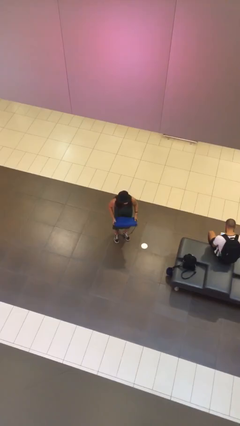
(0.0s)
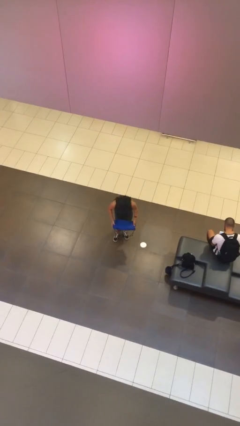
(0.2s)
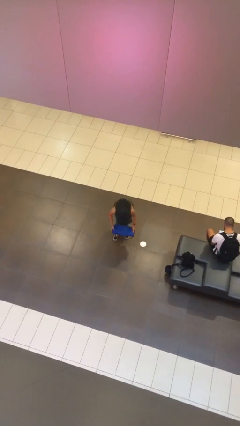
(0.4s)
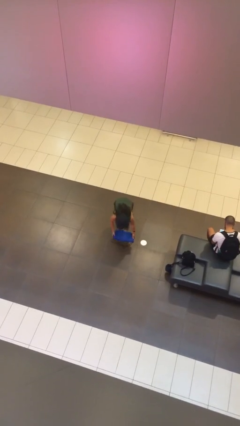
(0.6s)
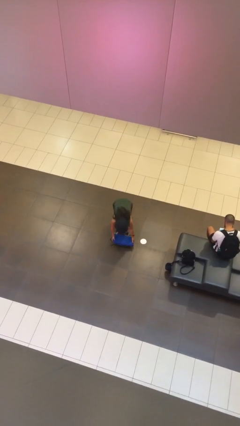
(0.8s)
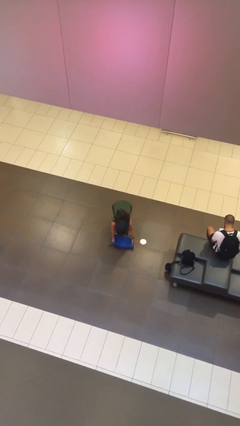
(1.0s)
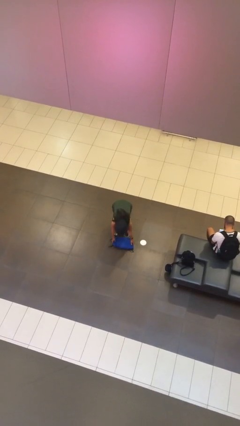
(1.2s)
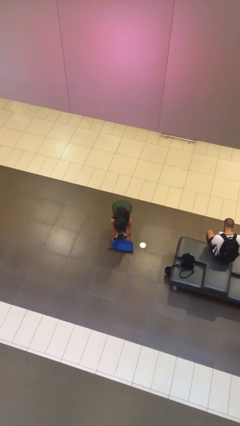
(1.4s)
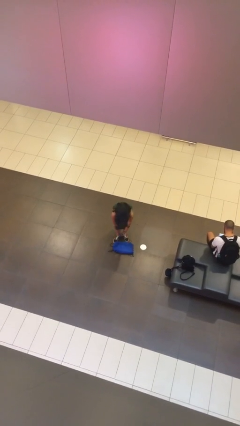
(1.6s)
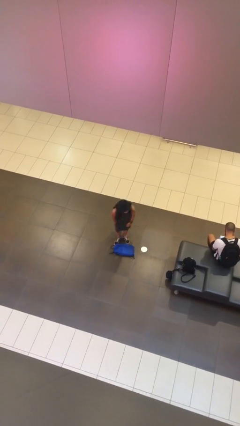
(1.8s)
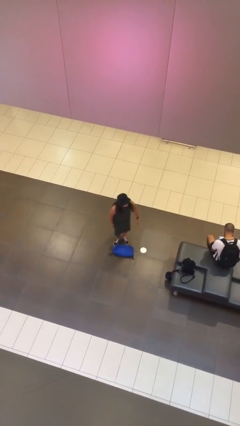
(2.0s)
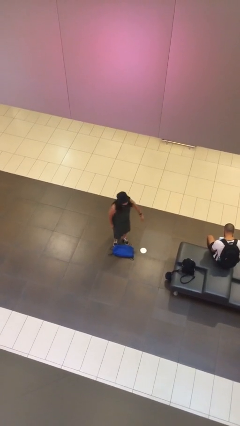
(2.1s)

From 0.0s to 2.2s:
person puts down object on floor

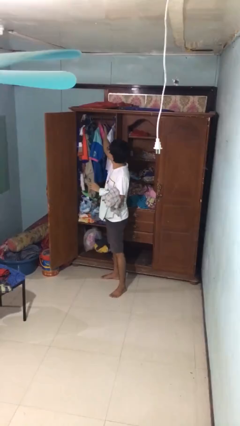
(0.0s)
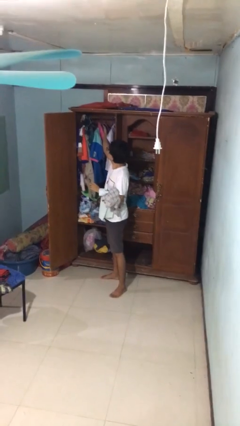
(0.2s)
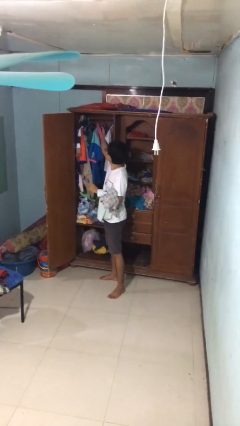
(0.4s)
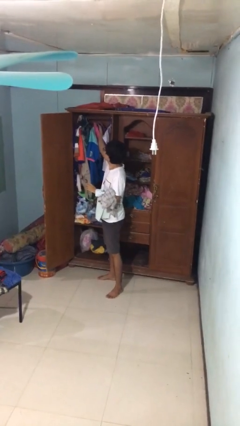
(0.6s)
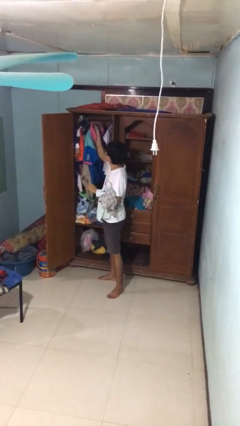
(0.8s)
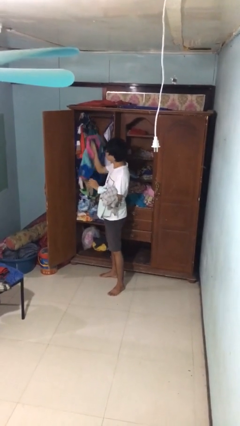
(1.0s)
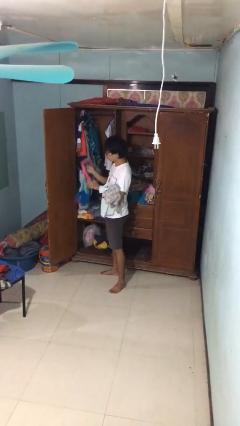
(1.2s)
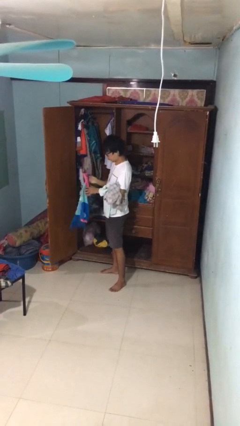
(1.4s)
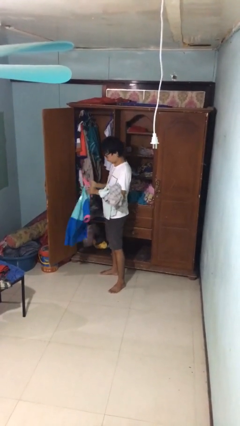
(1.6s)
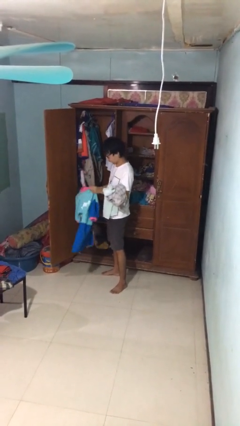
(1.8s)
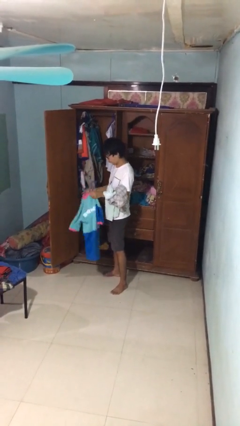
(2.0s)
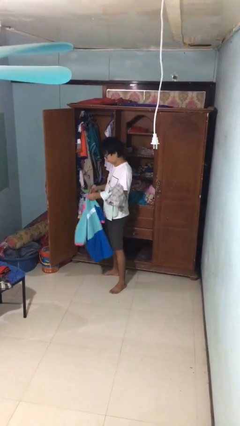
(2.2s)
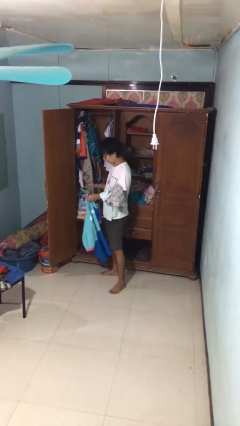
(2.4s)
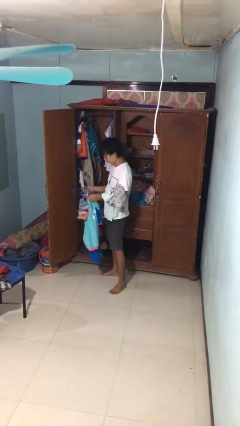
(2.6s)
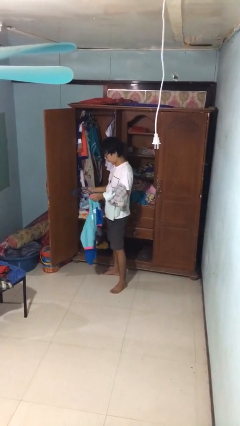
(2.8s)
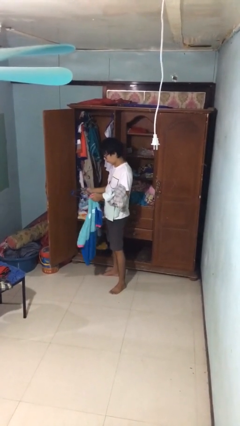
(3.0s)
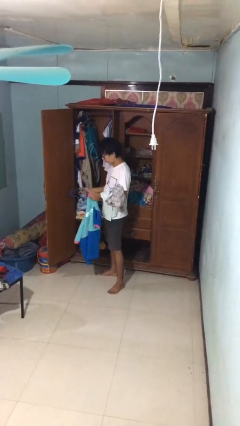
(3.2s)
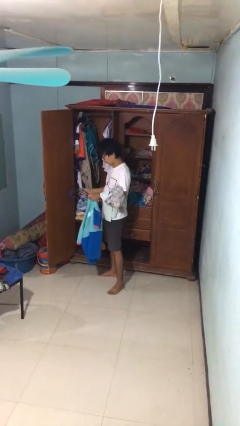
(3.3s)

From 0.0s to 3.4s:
person takes clothes from closet

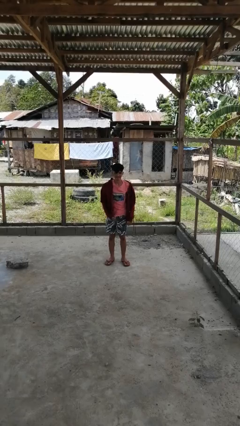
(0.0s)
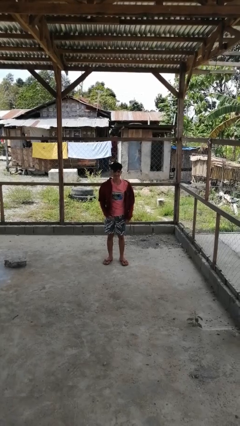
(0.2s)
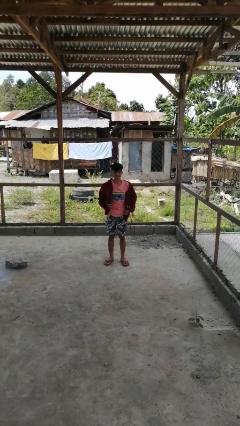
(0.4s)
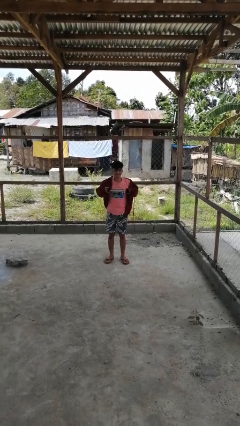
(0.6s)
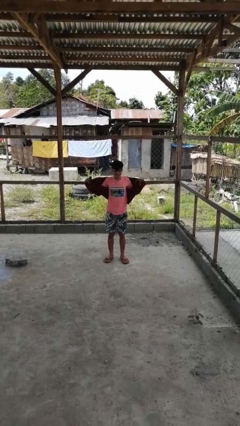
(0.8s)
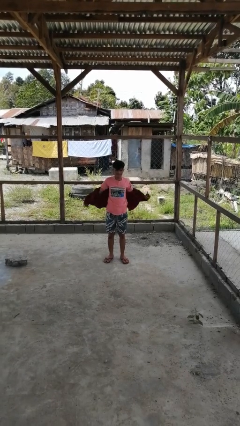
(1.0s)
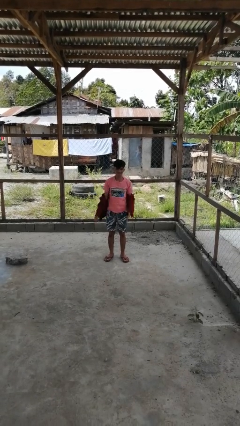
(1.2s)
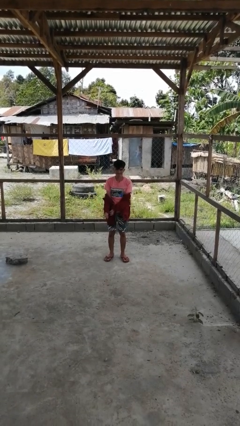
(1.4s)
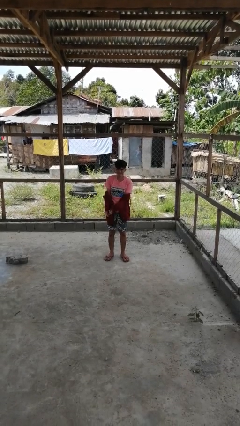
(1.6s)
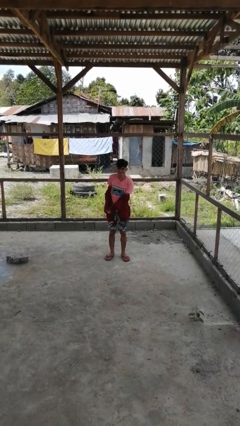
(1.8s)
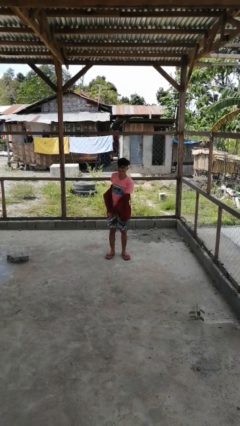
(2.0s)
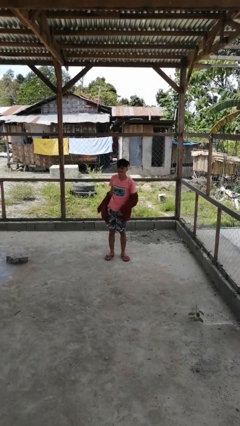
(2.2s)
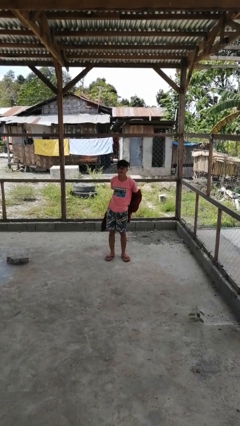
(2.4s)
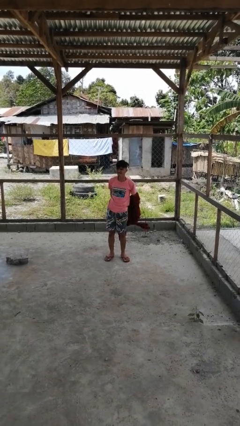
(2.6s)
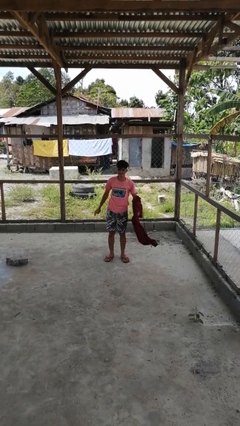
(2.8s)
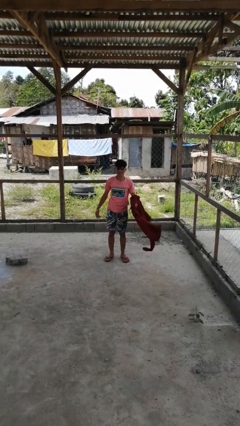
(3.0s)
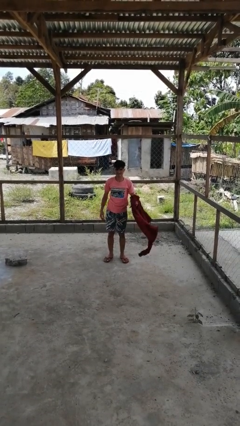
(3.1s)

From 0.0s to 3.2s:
person takes off jacket

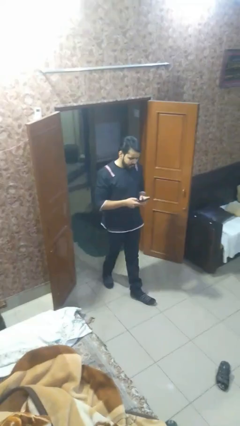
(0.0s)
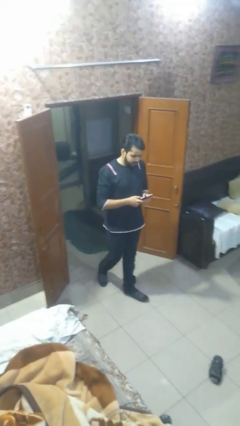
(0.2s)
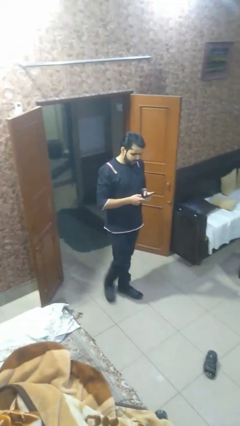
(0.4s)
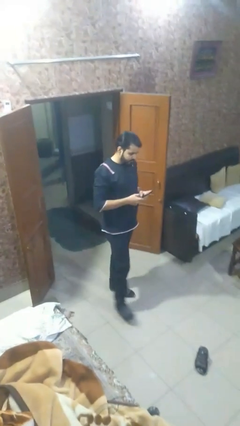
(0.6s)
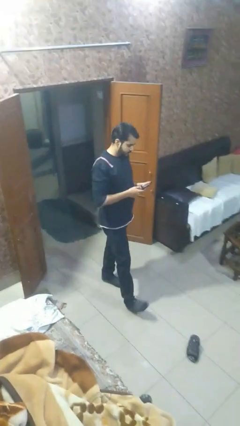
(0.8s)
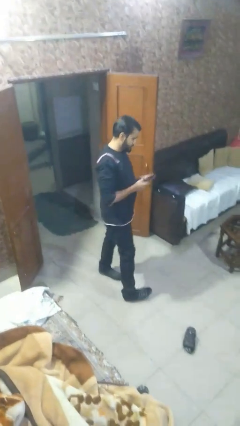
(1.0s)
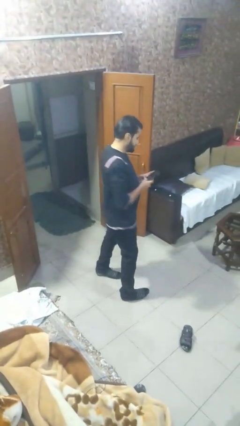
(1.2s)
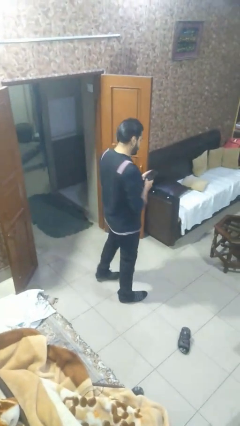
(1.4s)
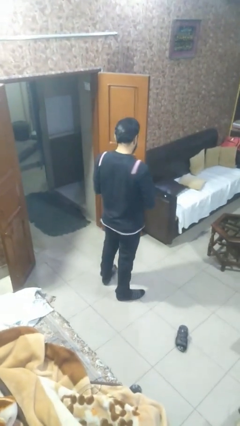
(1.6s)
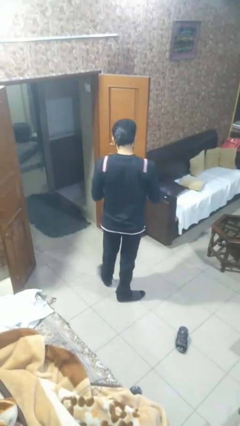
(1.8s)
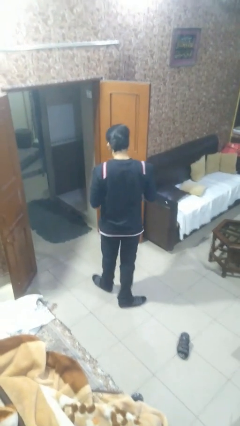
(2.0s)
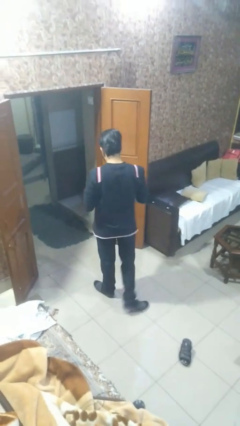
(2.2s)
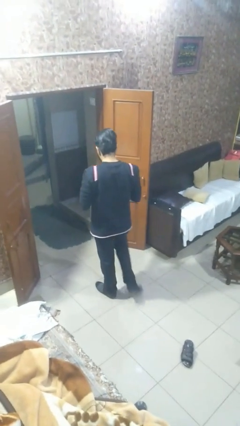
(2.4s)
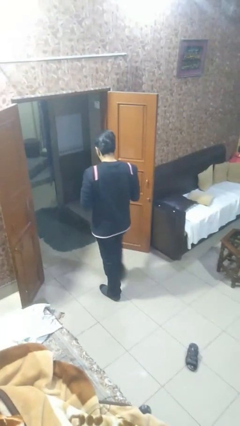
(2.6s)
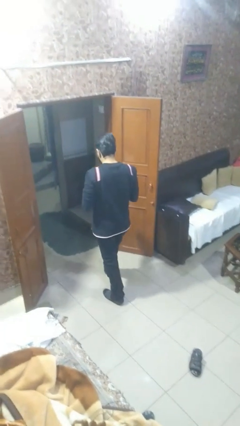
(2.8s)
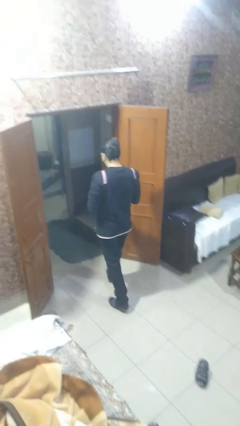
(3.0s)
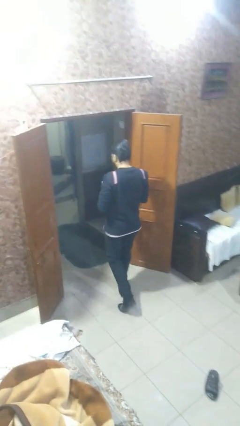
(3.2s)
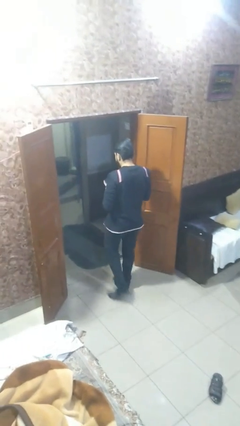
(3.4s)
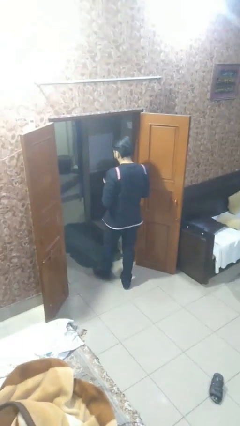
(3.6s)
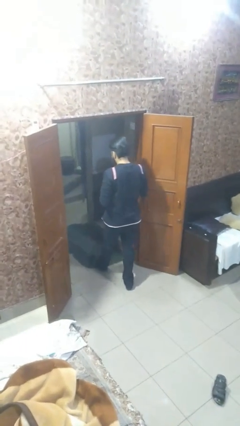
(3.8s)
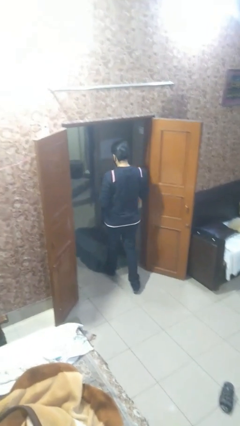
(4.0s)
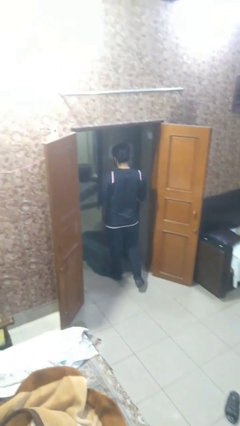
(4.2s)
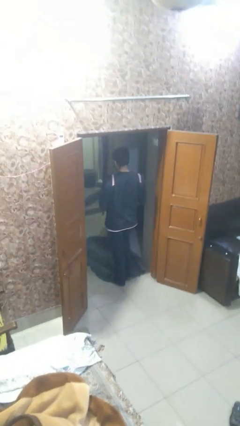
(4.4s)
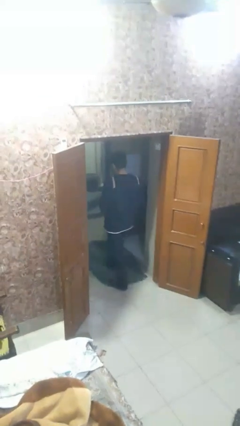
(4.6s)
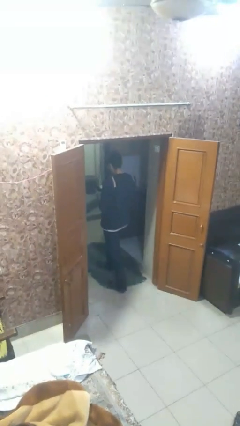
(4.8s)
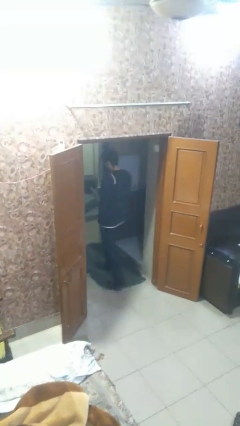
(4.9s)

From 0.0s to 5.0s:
person enters scene through structure

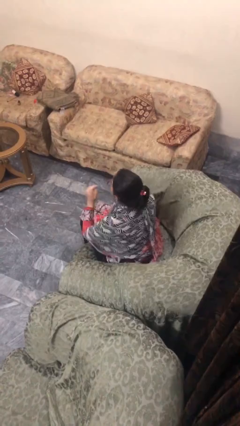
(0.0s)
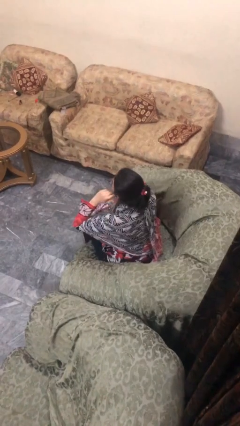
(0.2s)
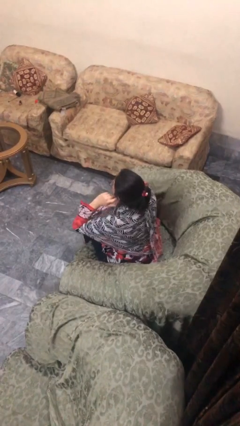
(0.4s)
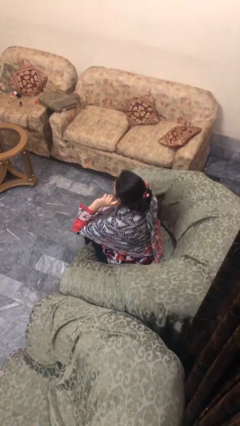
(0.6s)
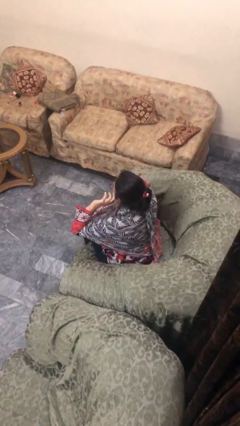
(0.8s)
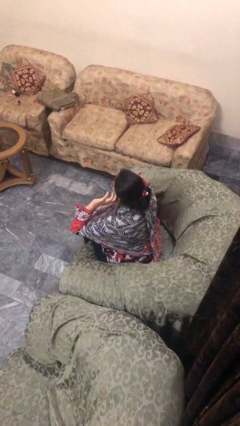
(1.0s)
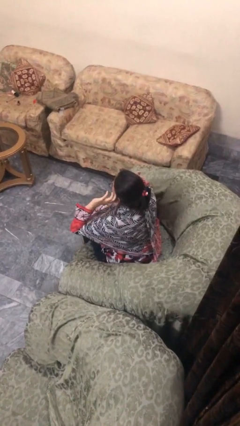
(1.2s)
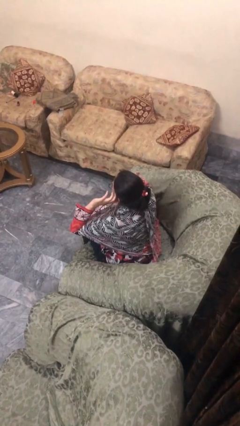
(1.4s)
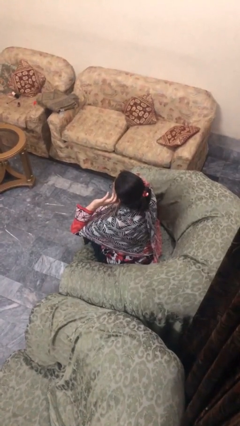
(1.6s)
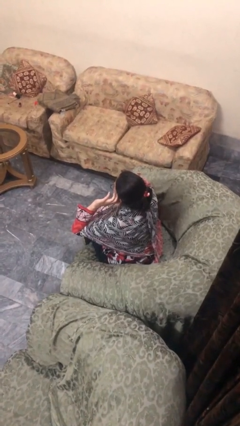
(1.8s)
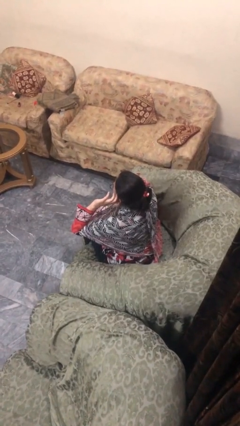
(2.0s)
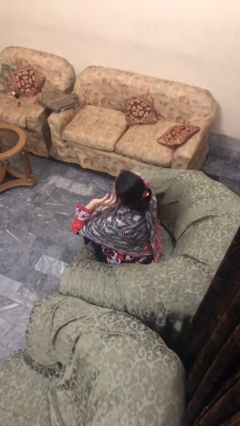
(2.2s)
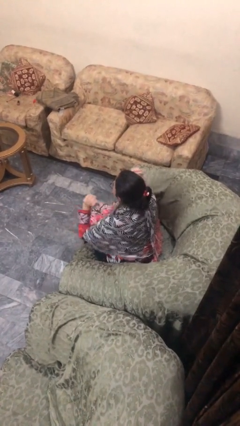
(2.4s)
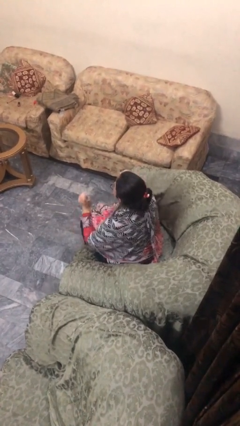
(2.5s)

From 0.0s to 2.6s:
person puts fingers in ear

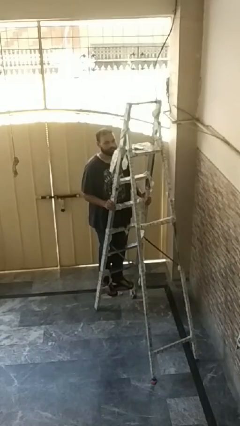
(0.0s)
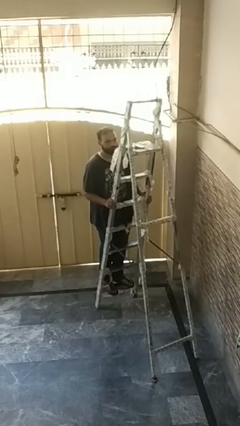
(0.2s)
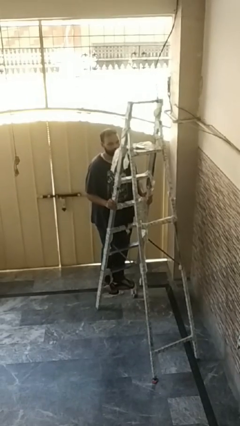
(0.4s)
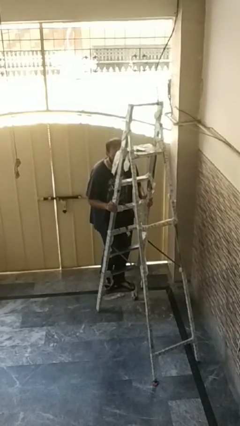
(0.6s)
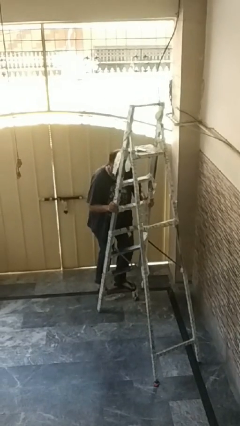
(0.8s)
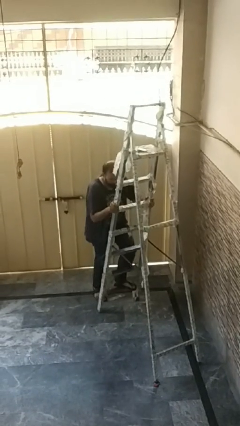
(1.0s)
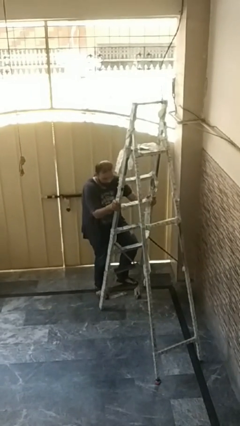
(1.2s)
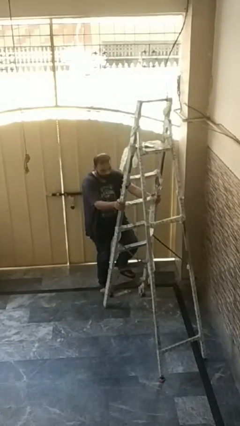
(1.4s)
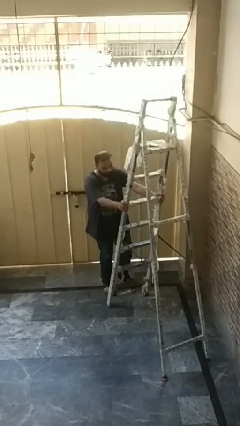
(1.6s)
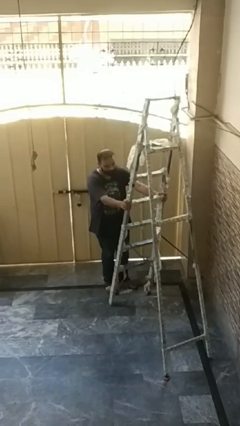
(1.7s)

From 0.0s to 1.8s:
person climbs down ladder
